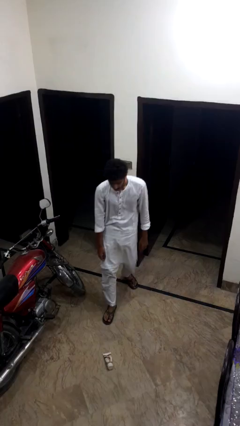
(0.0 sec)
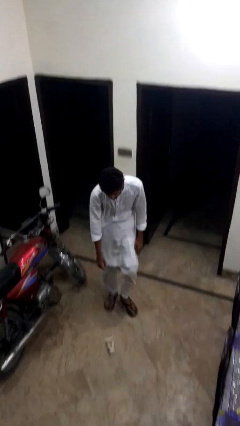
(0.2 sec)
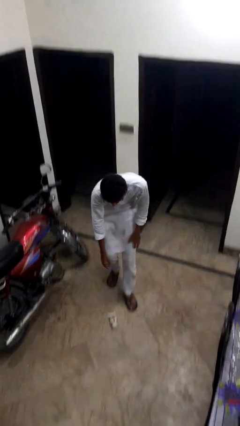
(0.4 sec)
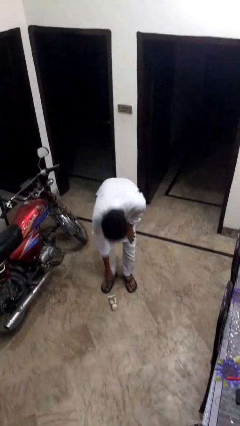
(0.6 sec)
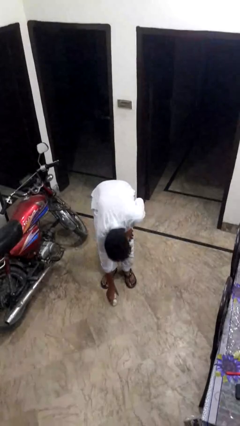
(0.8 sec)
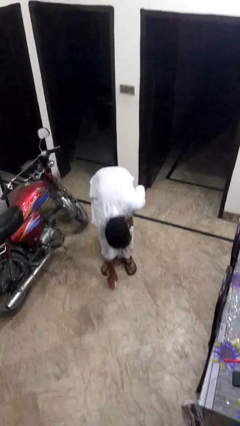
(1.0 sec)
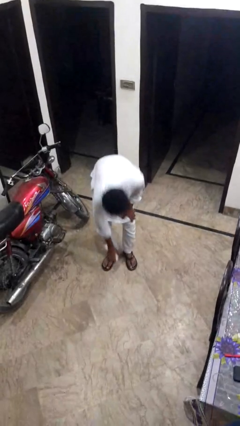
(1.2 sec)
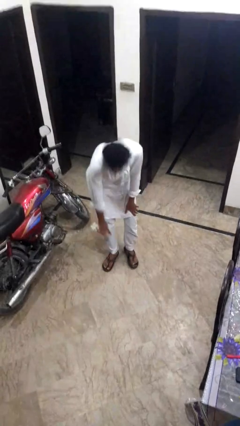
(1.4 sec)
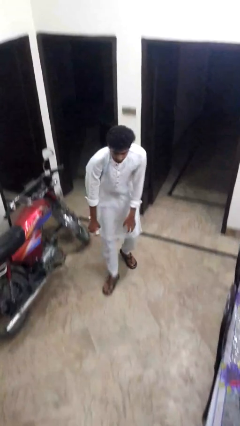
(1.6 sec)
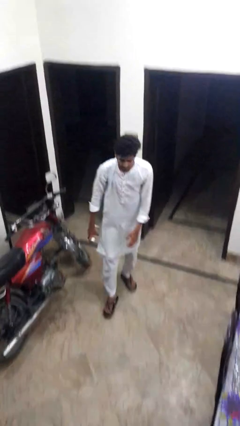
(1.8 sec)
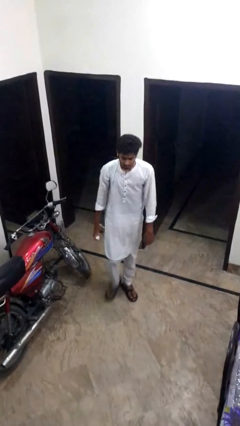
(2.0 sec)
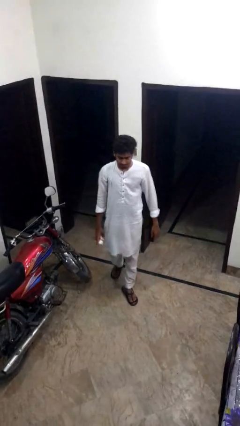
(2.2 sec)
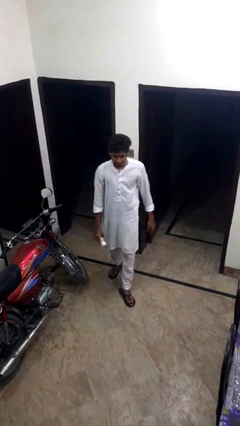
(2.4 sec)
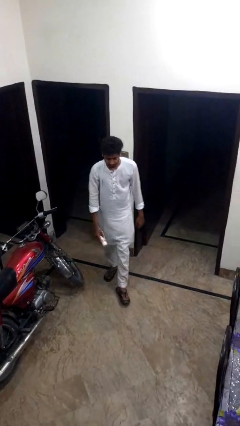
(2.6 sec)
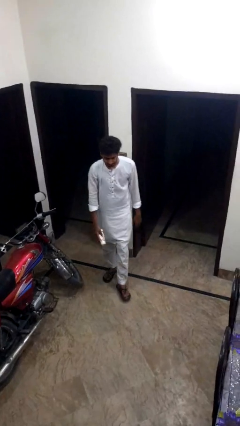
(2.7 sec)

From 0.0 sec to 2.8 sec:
person picks up object from floor

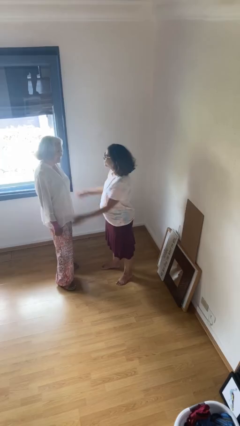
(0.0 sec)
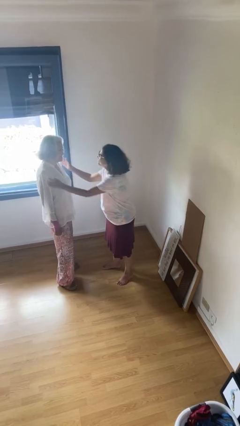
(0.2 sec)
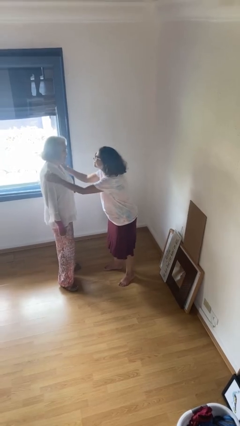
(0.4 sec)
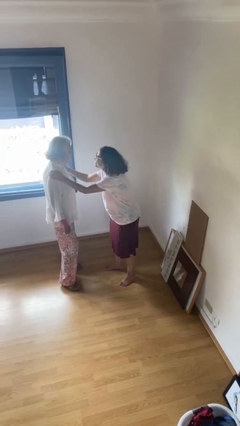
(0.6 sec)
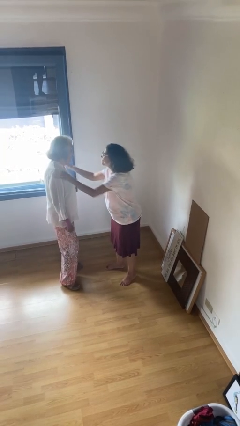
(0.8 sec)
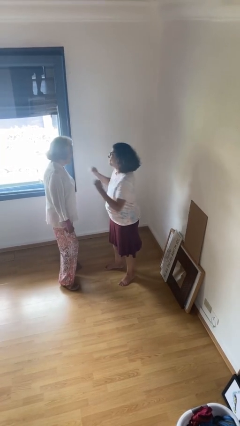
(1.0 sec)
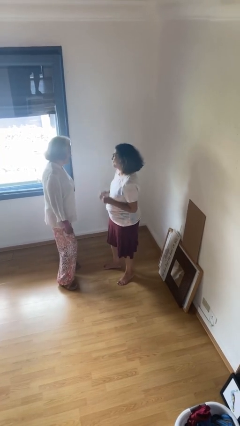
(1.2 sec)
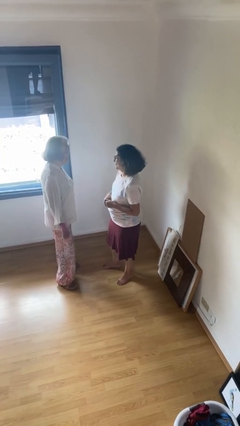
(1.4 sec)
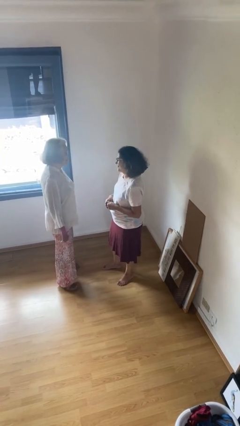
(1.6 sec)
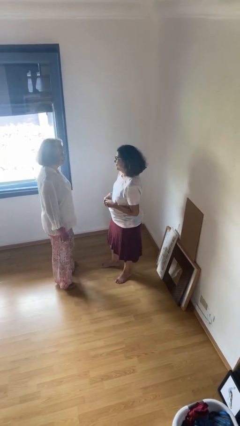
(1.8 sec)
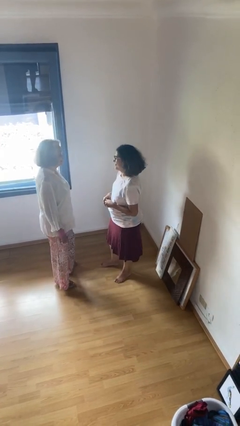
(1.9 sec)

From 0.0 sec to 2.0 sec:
person pounds shoulders of person

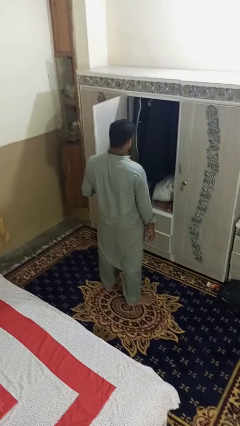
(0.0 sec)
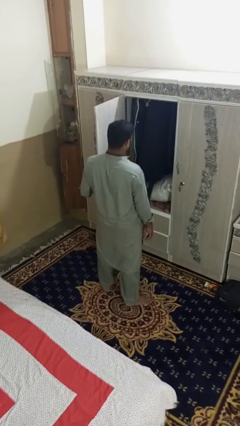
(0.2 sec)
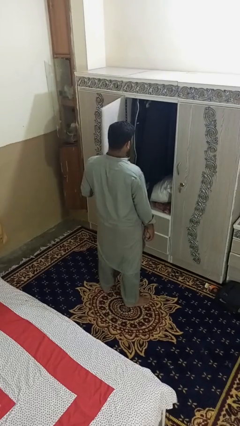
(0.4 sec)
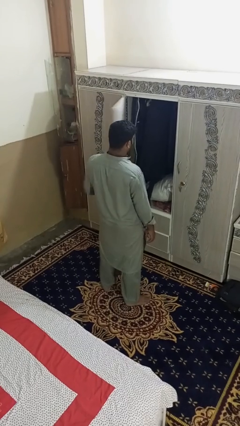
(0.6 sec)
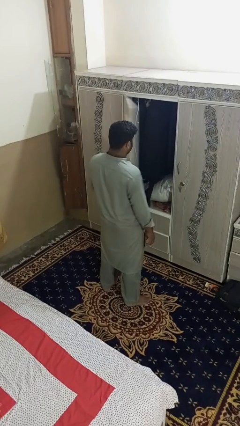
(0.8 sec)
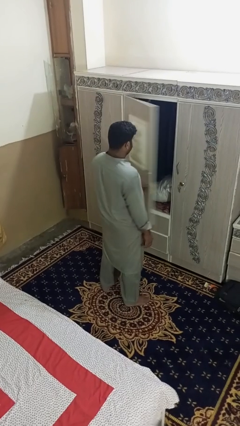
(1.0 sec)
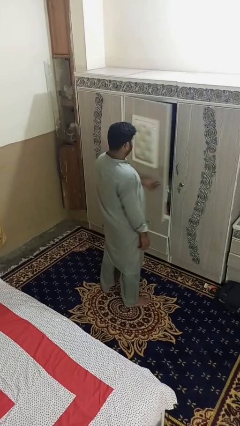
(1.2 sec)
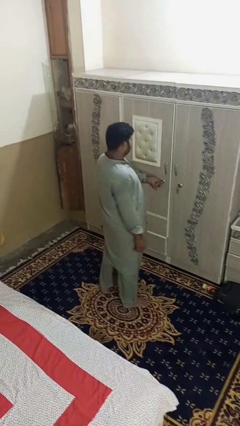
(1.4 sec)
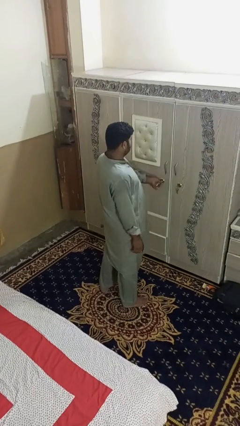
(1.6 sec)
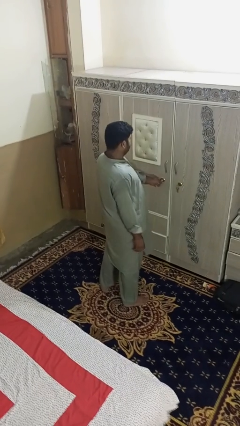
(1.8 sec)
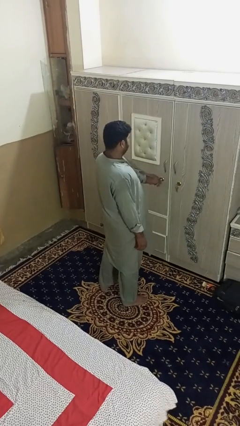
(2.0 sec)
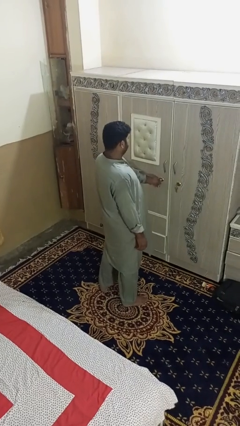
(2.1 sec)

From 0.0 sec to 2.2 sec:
person closes dresser drawer

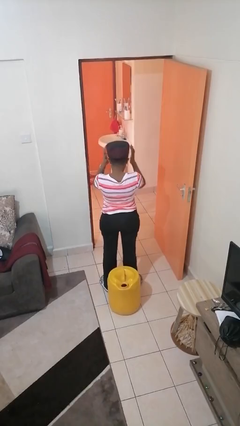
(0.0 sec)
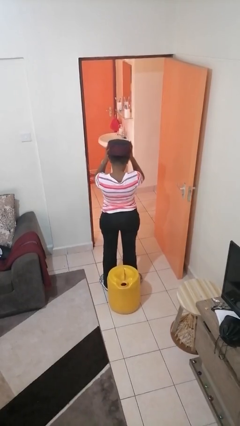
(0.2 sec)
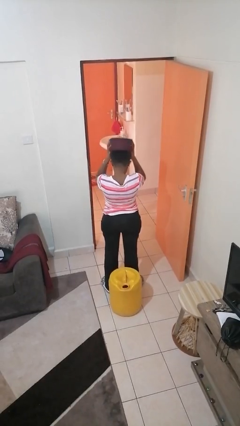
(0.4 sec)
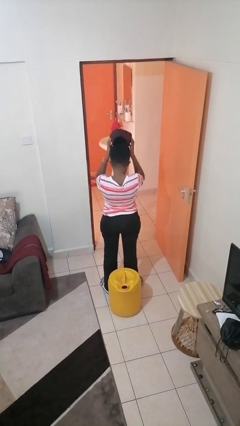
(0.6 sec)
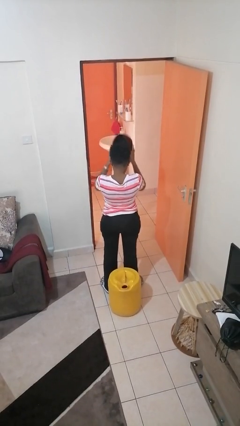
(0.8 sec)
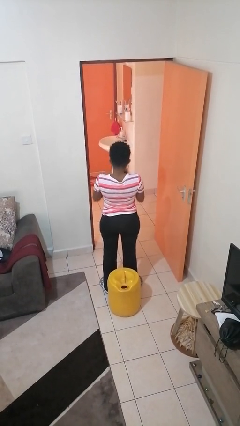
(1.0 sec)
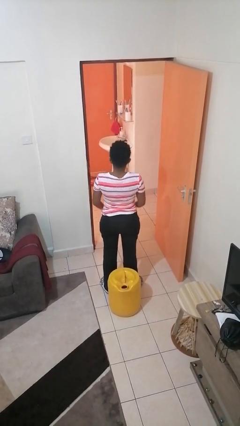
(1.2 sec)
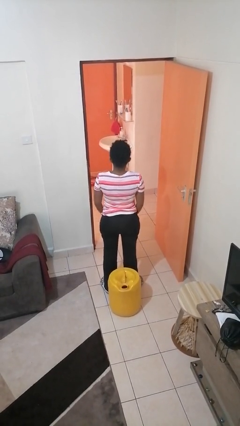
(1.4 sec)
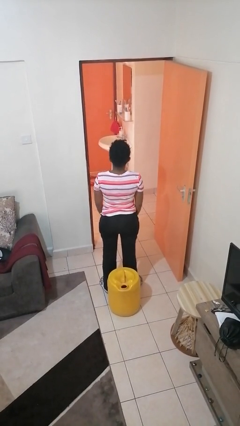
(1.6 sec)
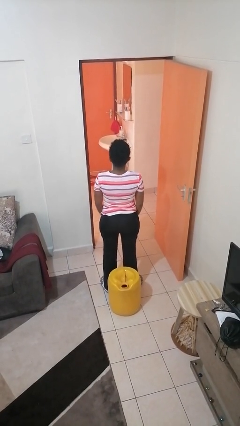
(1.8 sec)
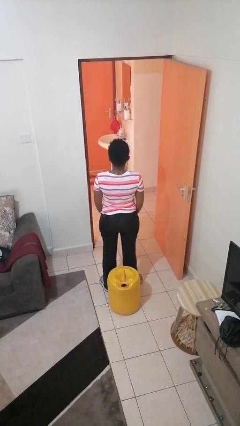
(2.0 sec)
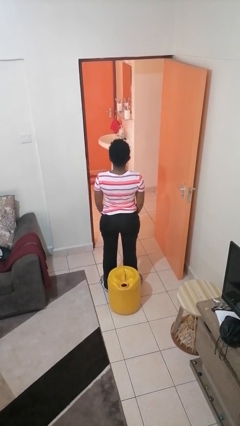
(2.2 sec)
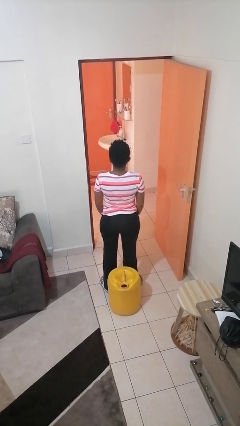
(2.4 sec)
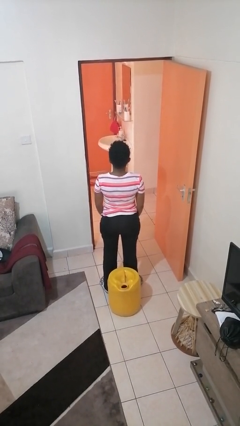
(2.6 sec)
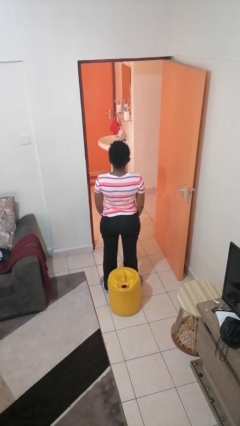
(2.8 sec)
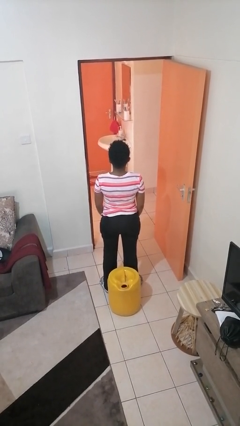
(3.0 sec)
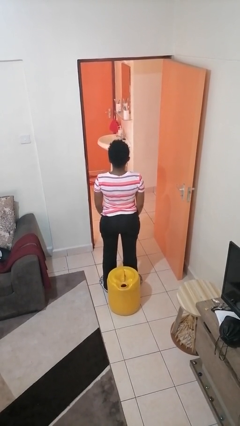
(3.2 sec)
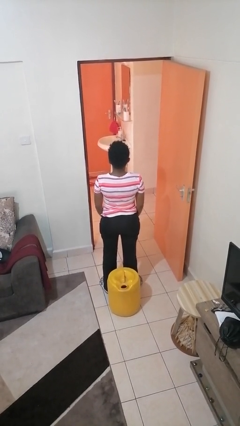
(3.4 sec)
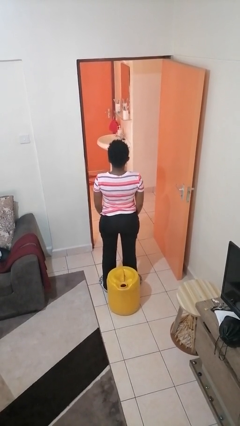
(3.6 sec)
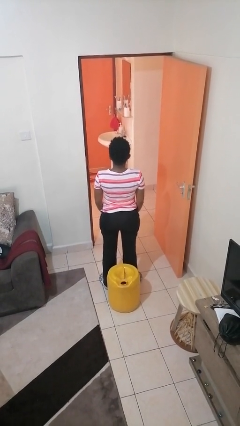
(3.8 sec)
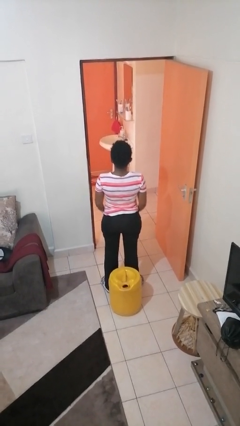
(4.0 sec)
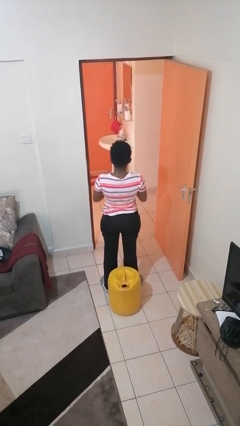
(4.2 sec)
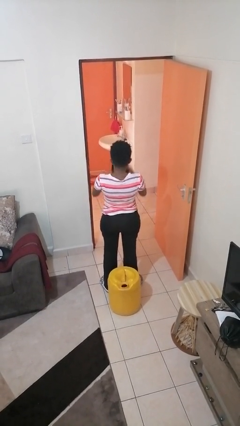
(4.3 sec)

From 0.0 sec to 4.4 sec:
person takes off hat

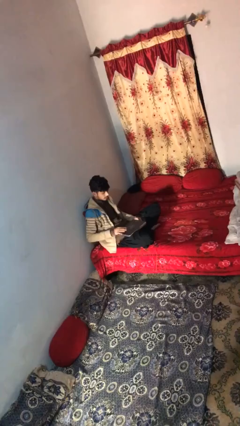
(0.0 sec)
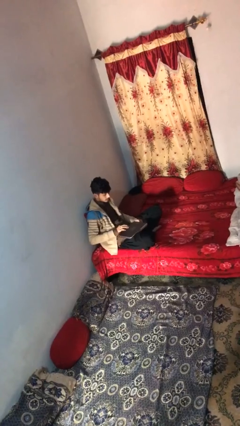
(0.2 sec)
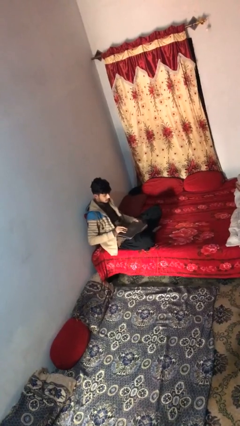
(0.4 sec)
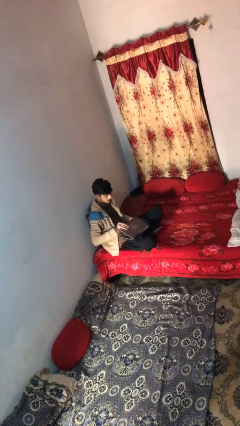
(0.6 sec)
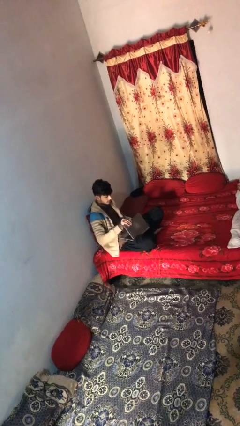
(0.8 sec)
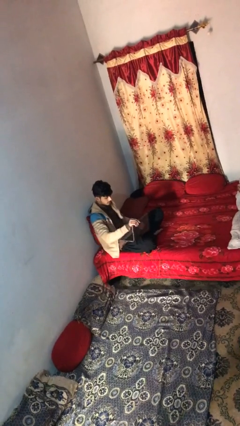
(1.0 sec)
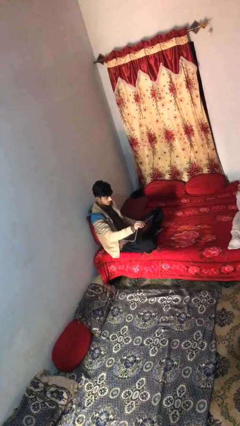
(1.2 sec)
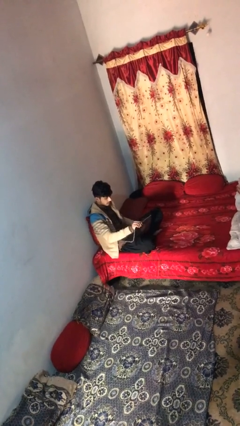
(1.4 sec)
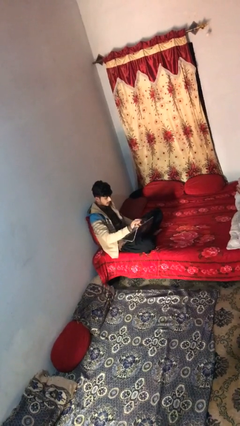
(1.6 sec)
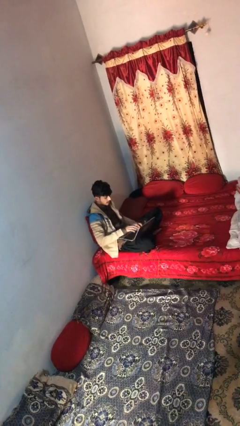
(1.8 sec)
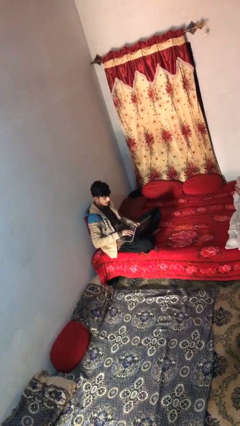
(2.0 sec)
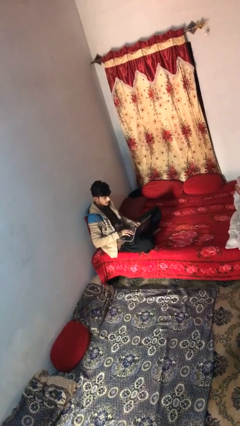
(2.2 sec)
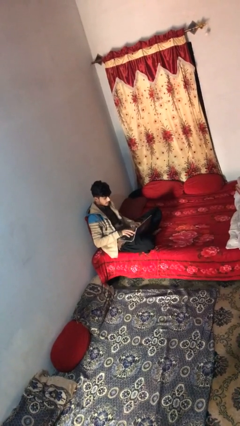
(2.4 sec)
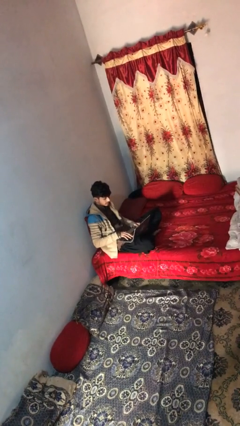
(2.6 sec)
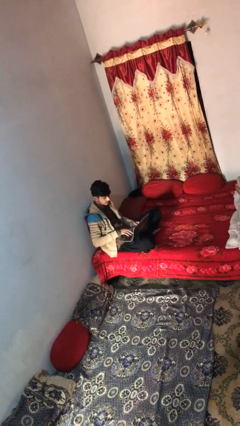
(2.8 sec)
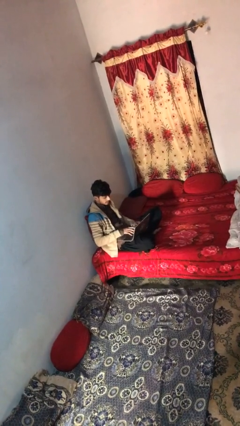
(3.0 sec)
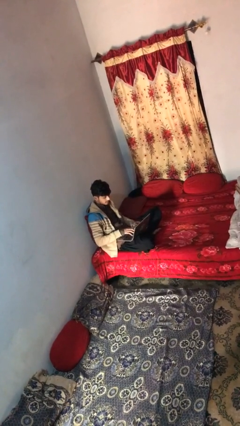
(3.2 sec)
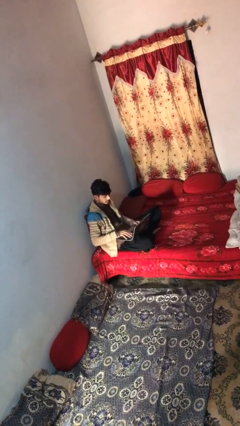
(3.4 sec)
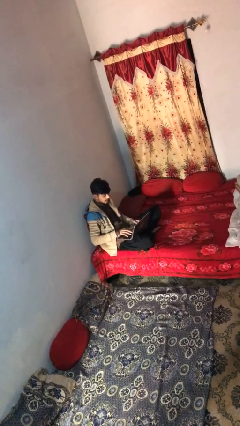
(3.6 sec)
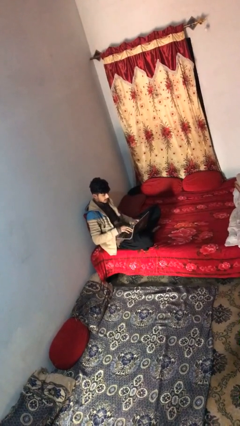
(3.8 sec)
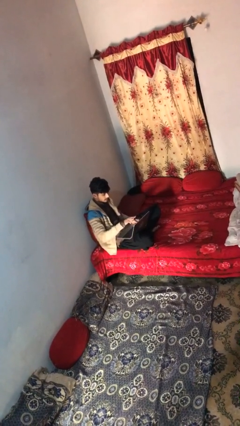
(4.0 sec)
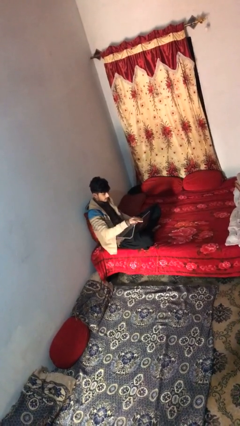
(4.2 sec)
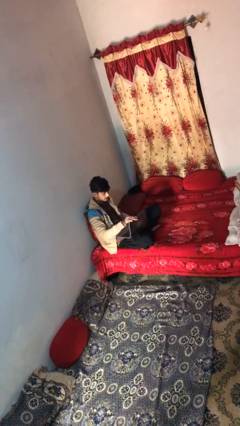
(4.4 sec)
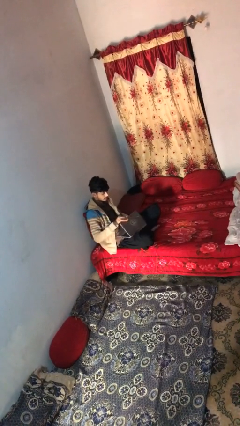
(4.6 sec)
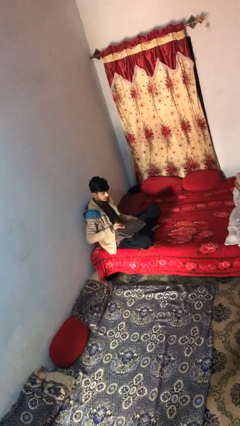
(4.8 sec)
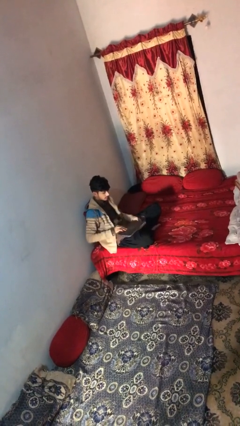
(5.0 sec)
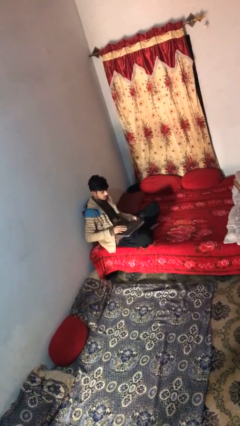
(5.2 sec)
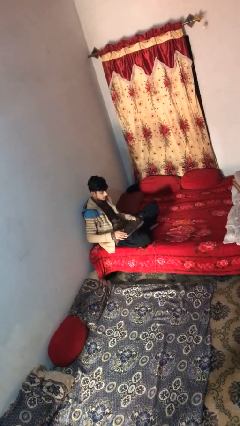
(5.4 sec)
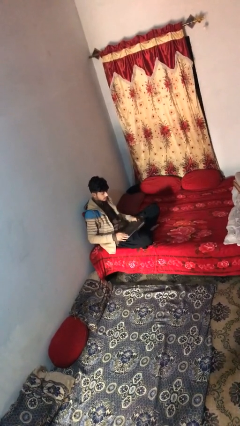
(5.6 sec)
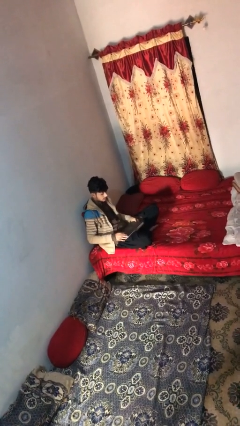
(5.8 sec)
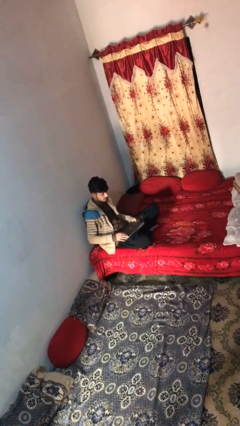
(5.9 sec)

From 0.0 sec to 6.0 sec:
person interacts with laptop
